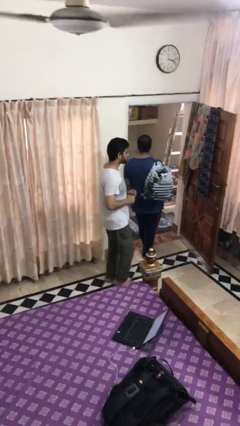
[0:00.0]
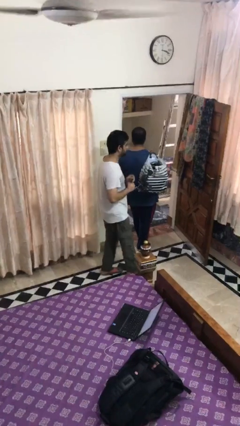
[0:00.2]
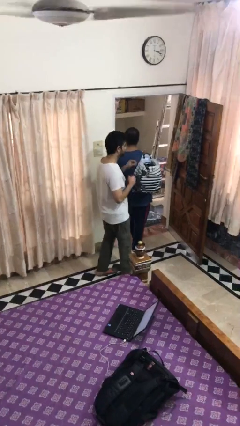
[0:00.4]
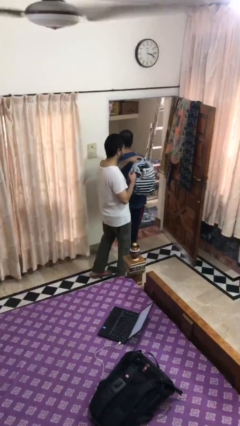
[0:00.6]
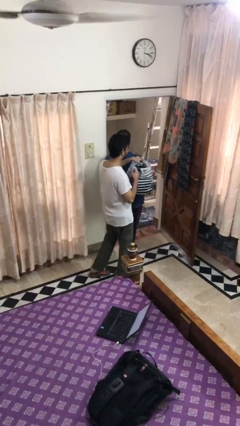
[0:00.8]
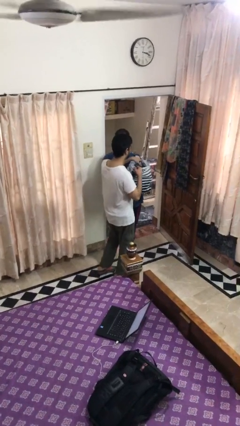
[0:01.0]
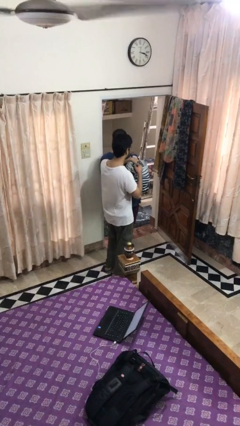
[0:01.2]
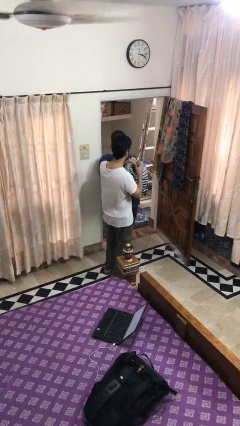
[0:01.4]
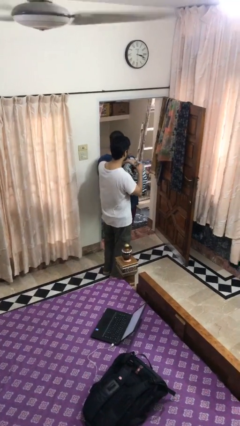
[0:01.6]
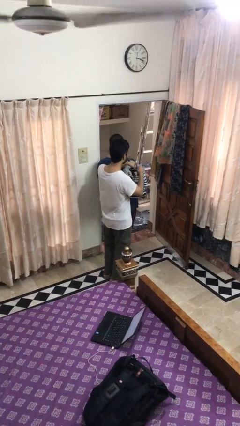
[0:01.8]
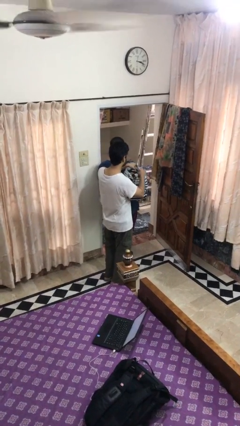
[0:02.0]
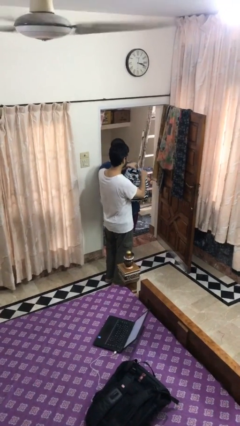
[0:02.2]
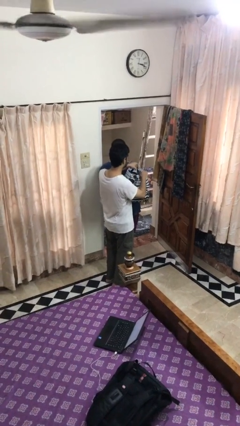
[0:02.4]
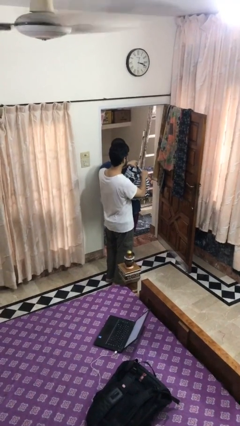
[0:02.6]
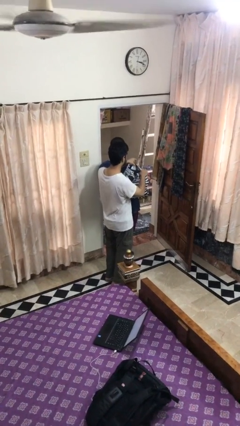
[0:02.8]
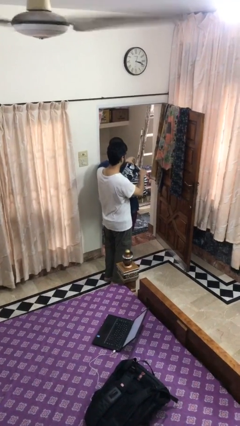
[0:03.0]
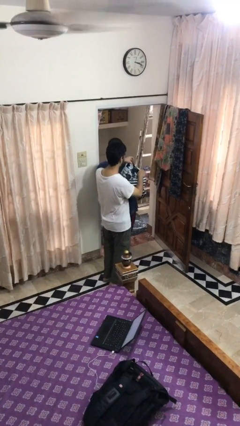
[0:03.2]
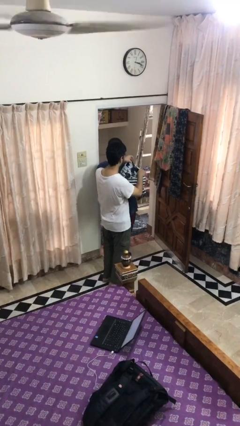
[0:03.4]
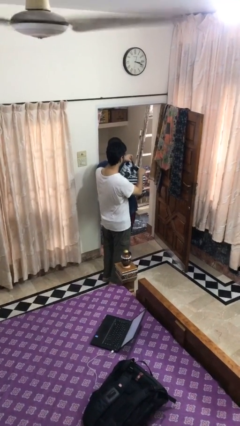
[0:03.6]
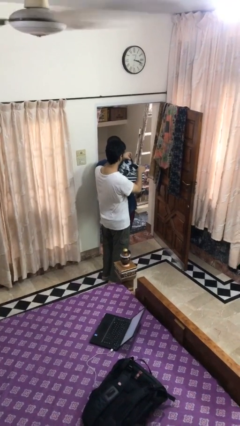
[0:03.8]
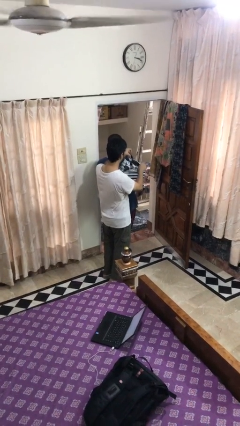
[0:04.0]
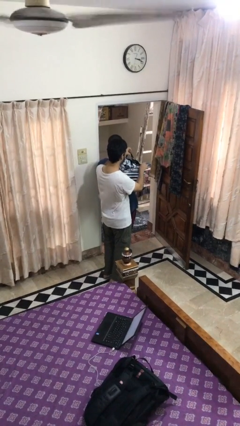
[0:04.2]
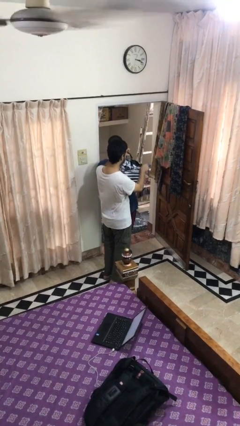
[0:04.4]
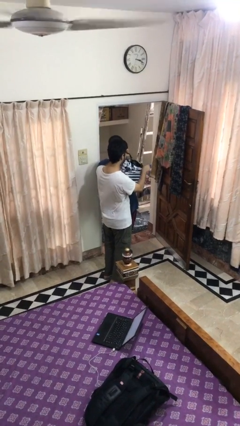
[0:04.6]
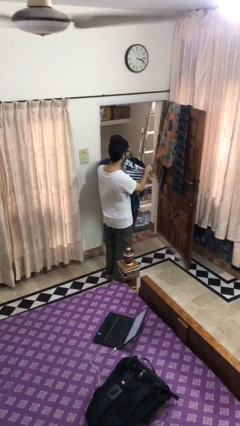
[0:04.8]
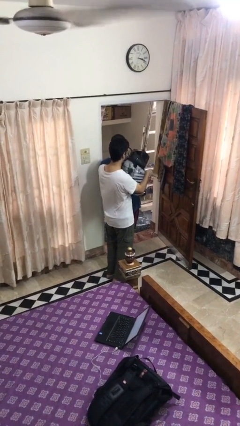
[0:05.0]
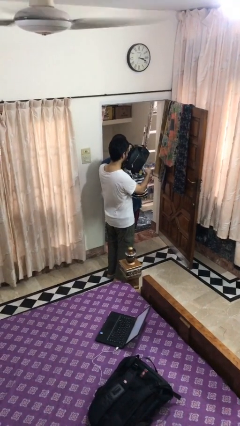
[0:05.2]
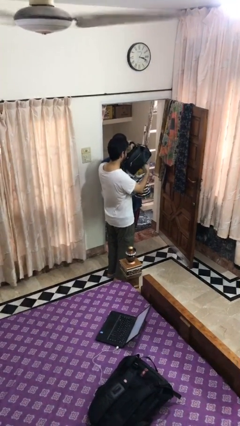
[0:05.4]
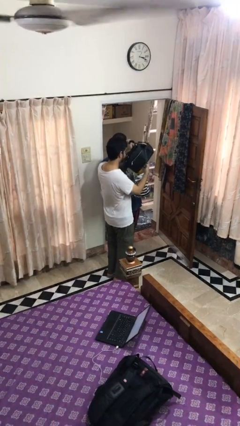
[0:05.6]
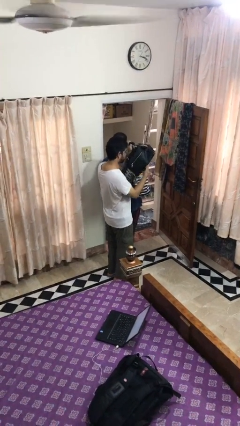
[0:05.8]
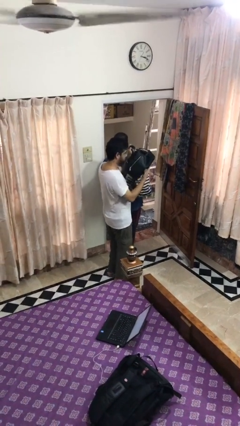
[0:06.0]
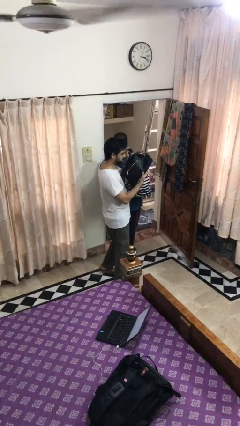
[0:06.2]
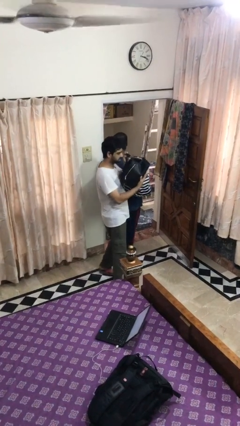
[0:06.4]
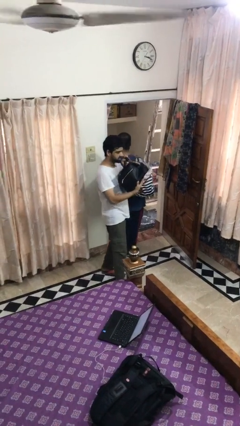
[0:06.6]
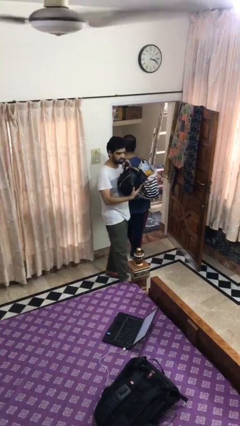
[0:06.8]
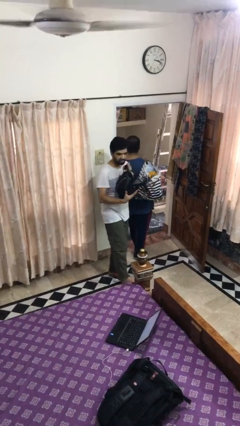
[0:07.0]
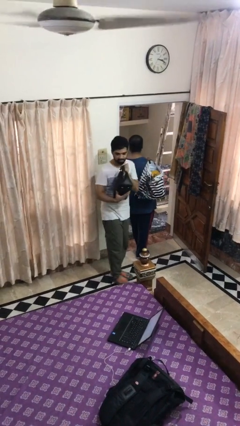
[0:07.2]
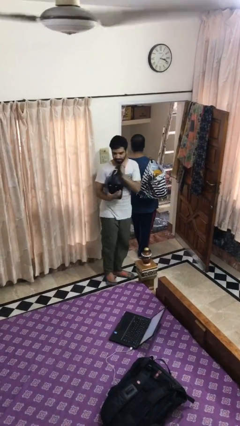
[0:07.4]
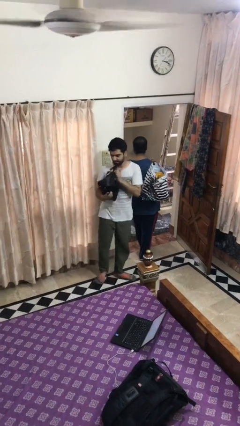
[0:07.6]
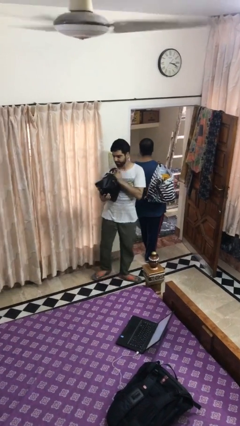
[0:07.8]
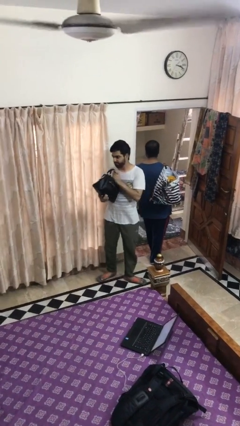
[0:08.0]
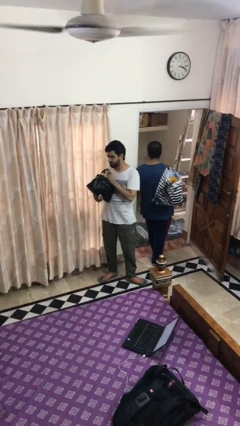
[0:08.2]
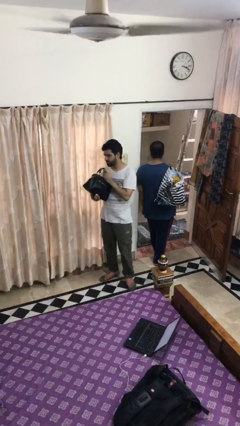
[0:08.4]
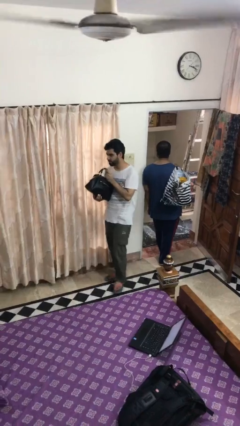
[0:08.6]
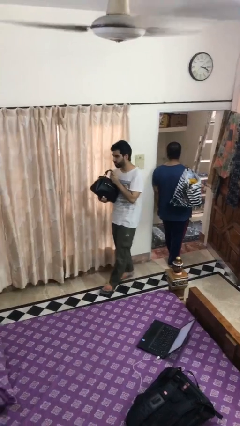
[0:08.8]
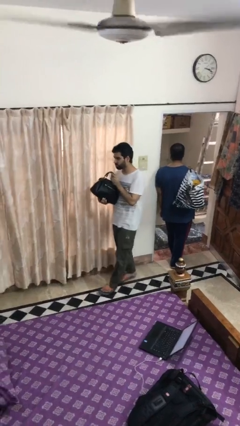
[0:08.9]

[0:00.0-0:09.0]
person steals object from person

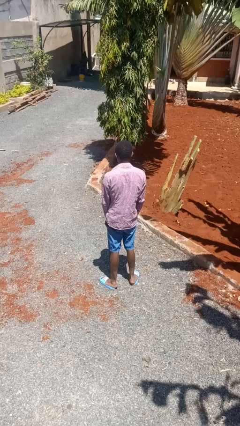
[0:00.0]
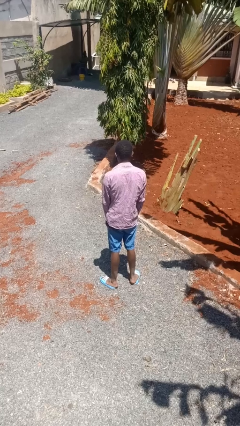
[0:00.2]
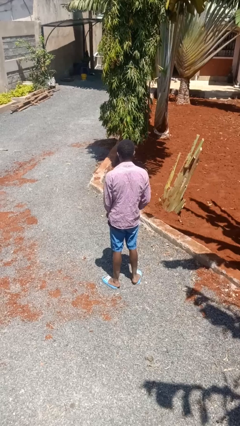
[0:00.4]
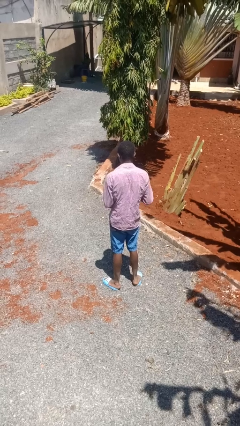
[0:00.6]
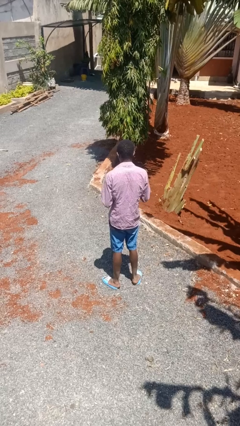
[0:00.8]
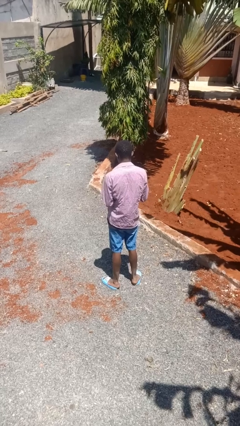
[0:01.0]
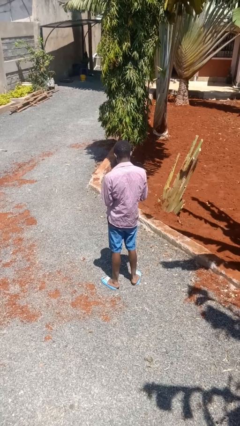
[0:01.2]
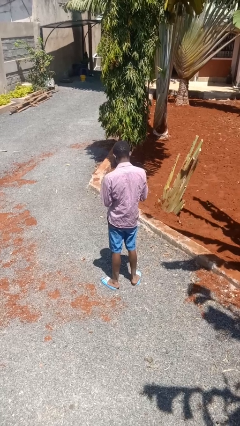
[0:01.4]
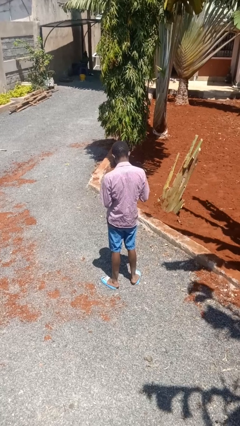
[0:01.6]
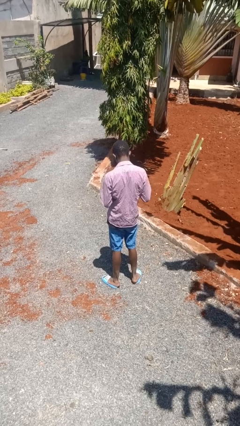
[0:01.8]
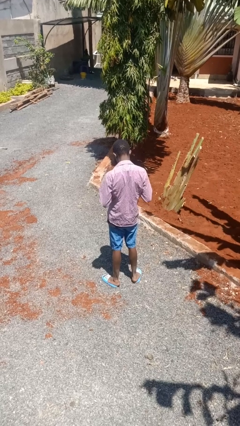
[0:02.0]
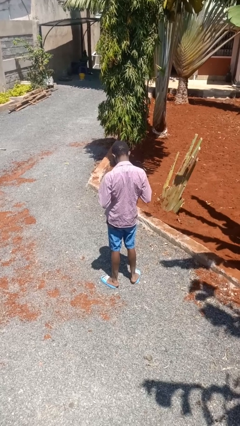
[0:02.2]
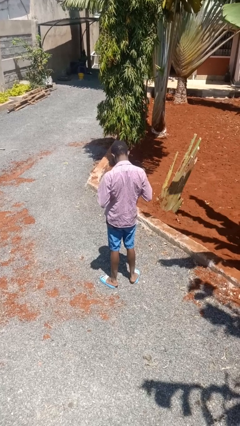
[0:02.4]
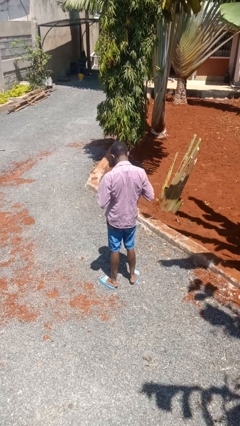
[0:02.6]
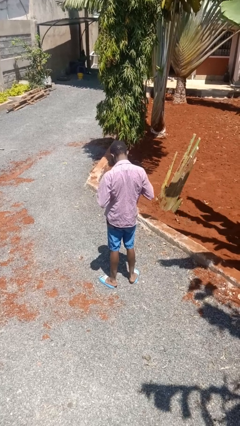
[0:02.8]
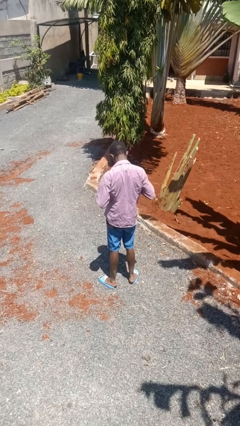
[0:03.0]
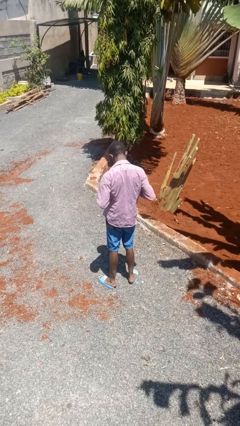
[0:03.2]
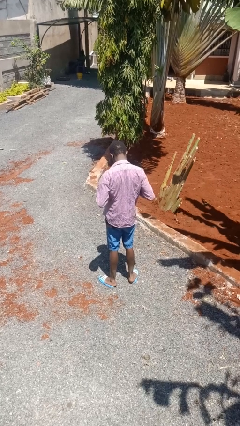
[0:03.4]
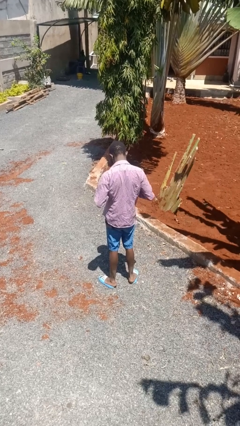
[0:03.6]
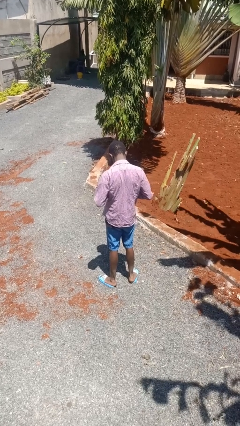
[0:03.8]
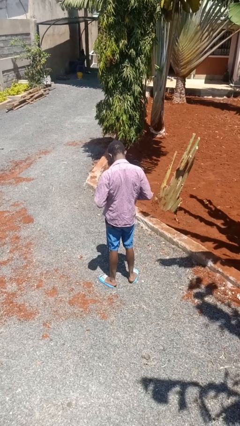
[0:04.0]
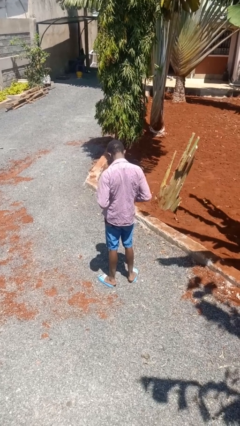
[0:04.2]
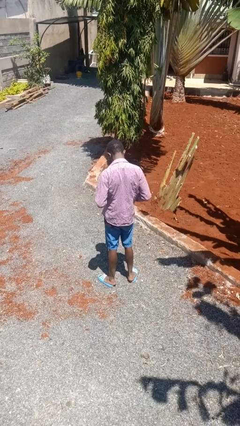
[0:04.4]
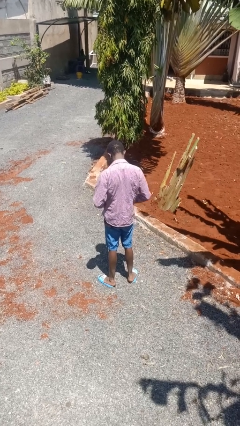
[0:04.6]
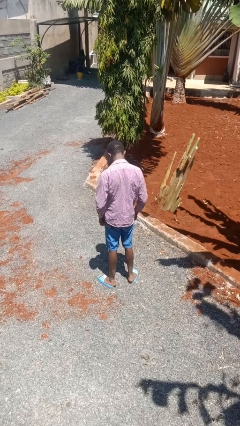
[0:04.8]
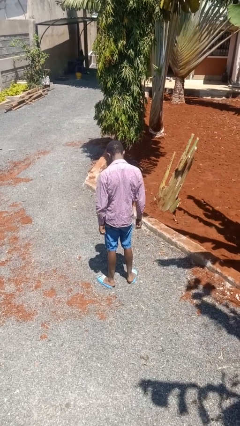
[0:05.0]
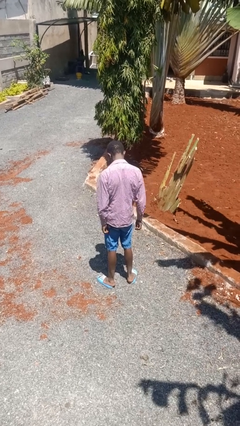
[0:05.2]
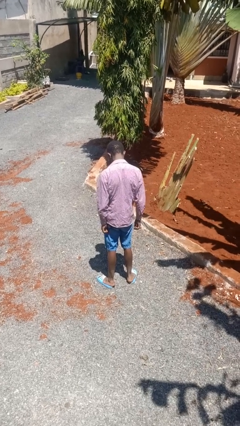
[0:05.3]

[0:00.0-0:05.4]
person unbuttons shirt

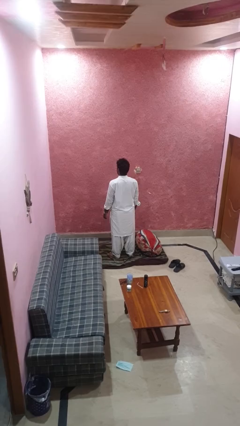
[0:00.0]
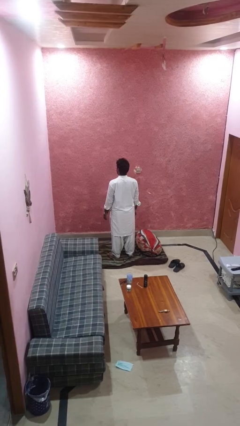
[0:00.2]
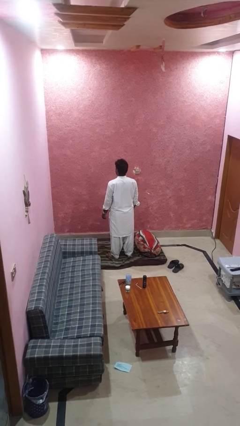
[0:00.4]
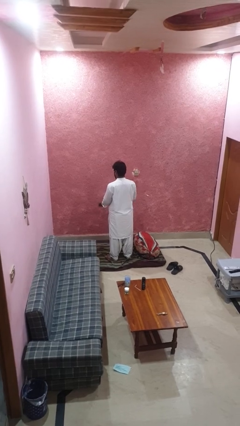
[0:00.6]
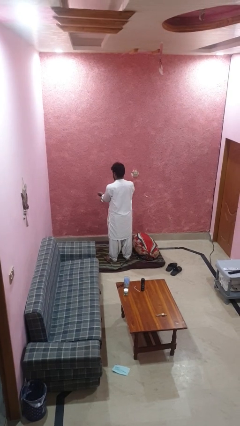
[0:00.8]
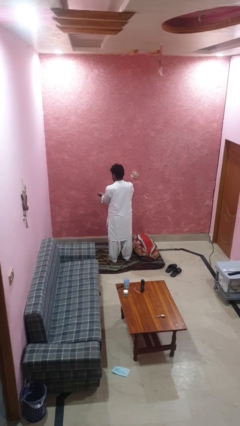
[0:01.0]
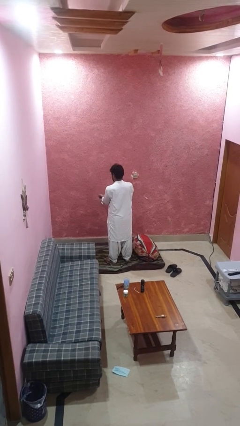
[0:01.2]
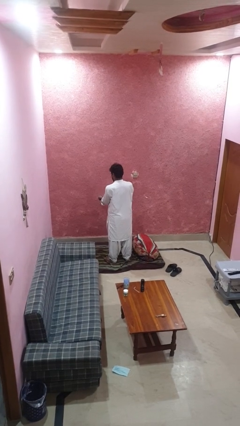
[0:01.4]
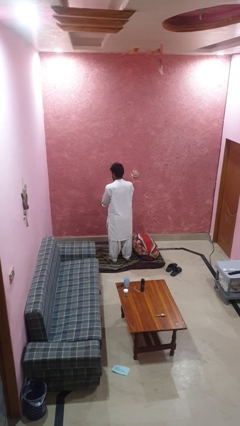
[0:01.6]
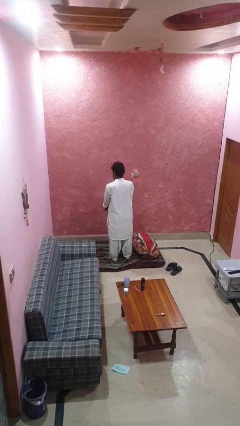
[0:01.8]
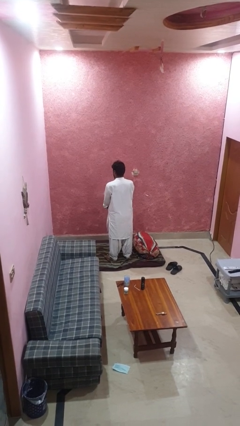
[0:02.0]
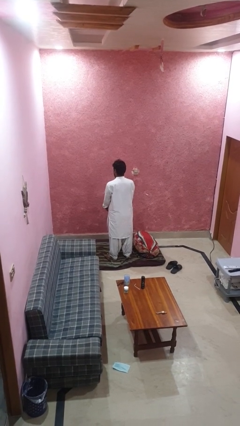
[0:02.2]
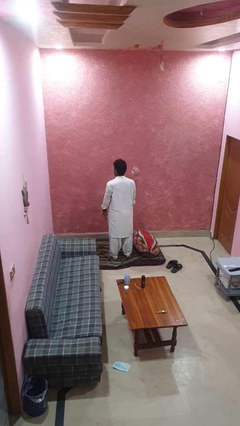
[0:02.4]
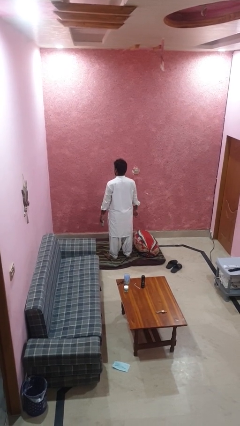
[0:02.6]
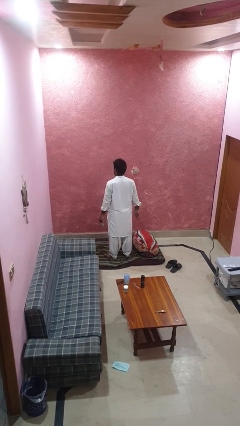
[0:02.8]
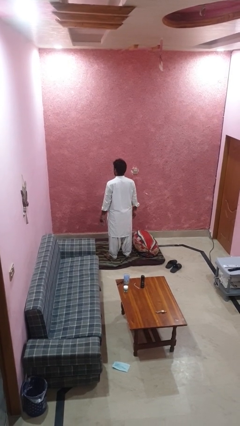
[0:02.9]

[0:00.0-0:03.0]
person takes off wristwatch

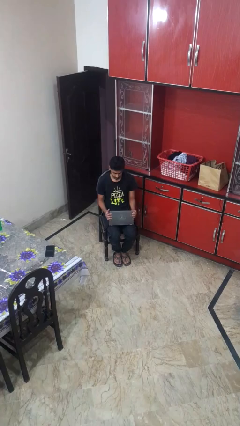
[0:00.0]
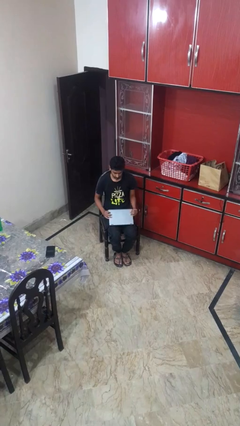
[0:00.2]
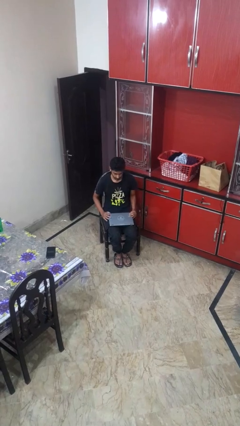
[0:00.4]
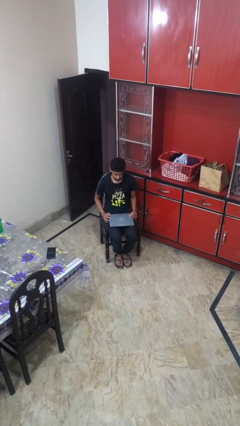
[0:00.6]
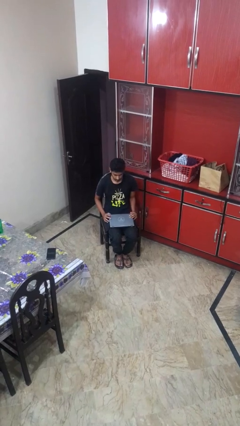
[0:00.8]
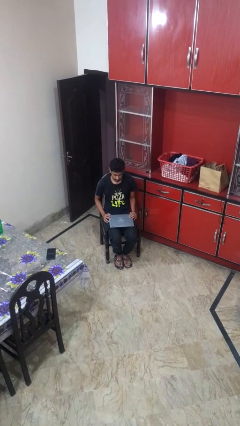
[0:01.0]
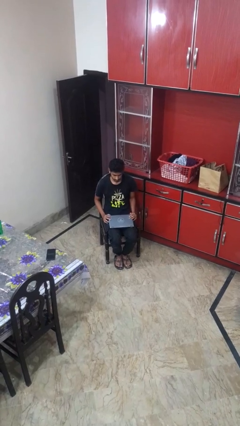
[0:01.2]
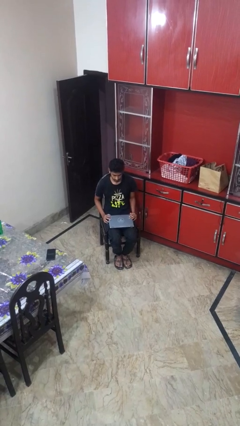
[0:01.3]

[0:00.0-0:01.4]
person closes laptop
